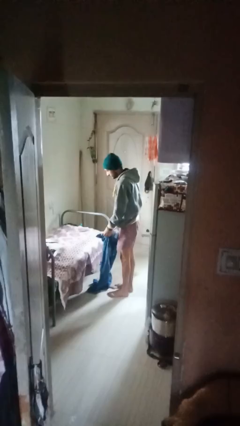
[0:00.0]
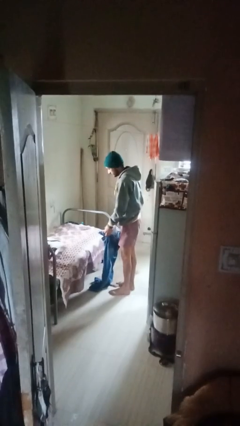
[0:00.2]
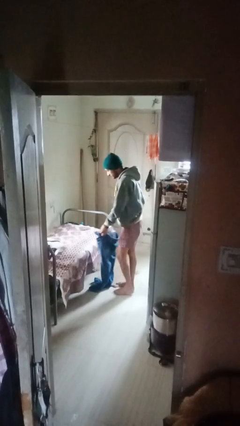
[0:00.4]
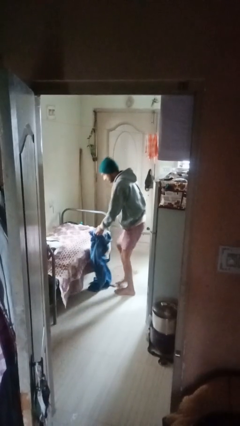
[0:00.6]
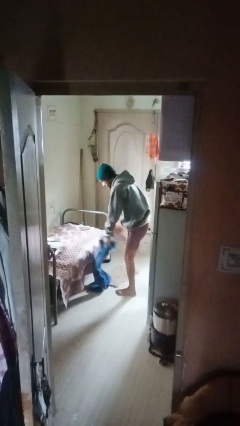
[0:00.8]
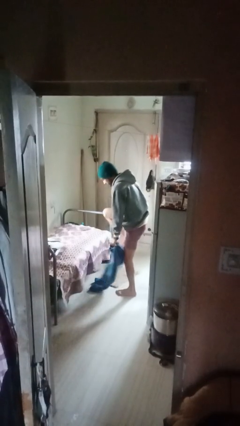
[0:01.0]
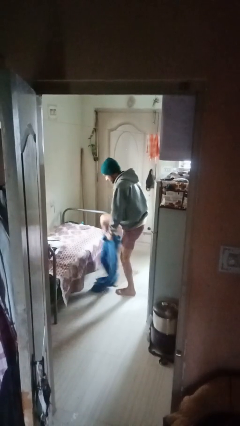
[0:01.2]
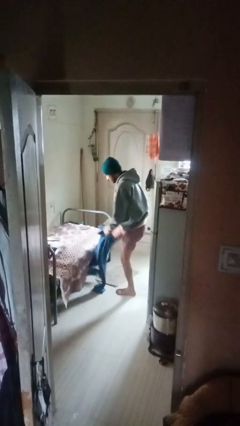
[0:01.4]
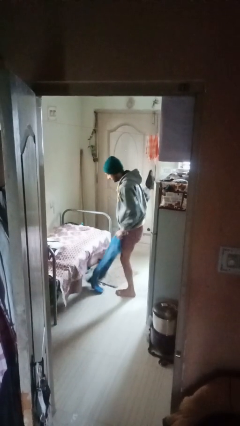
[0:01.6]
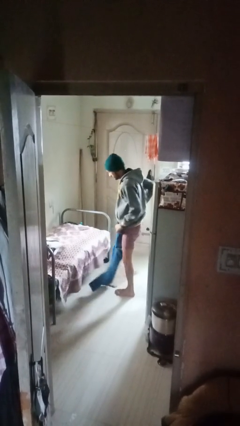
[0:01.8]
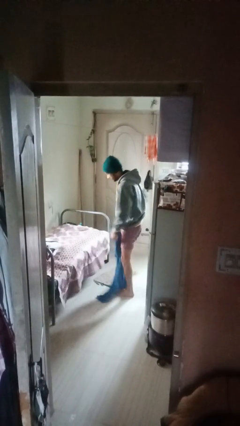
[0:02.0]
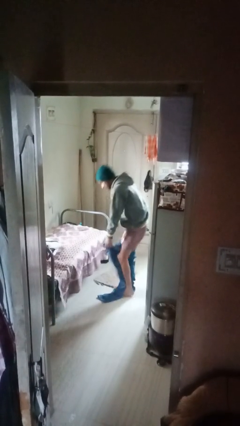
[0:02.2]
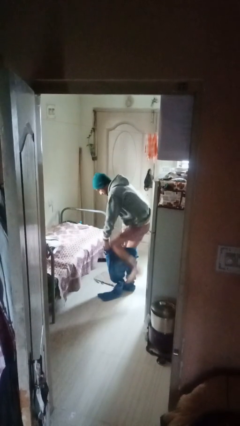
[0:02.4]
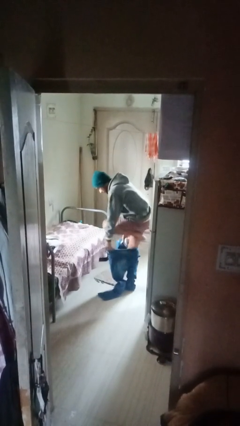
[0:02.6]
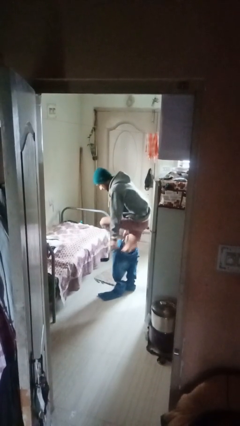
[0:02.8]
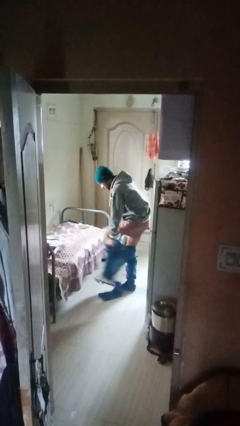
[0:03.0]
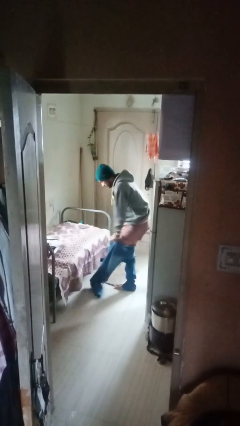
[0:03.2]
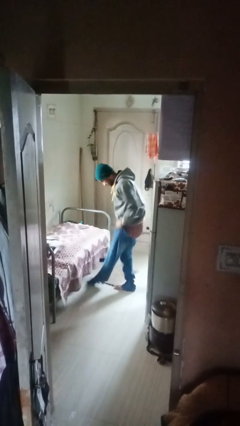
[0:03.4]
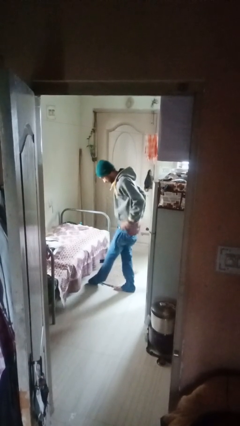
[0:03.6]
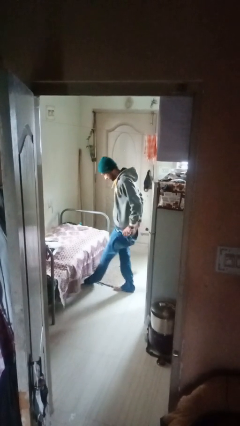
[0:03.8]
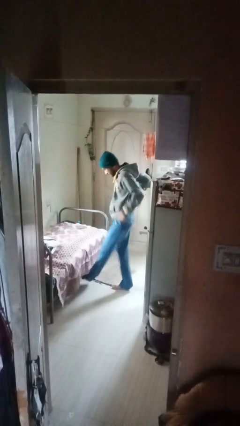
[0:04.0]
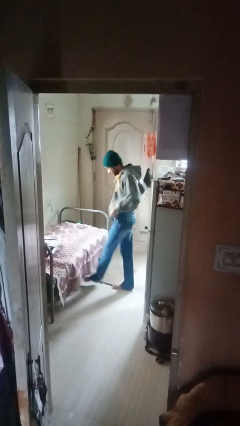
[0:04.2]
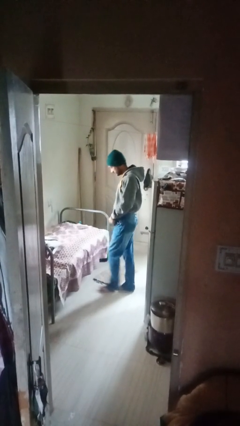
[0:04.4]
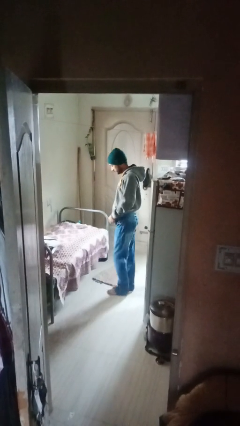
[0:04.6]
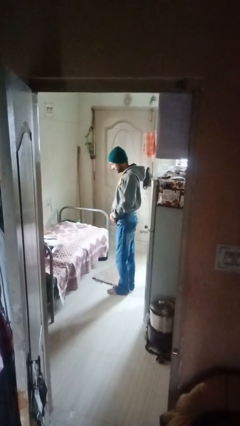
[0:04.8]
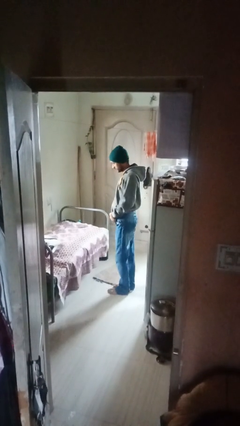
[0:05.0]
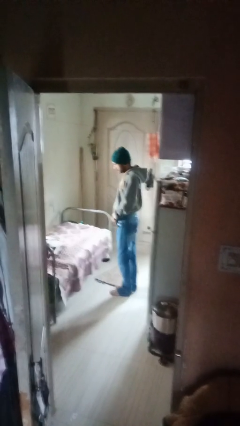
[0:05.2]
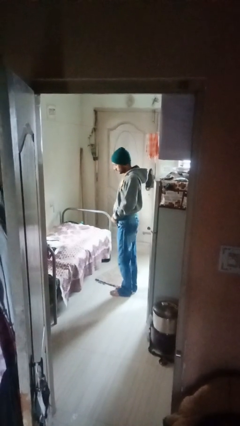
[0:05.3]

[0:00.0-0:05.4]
person puts on pants

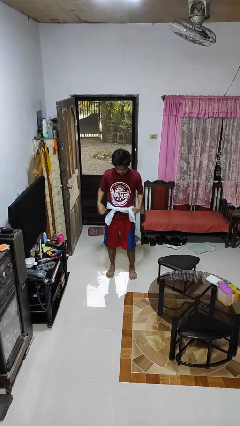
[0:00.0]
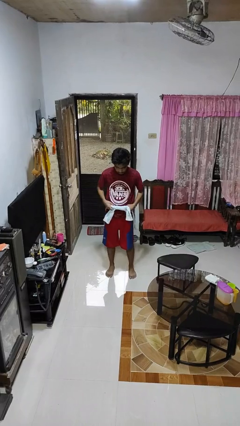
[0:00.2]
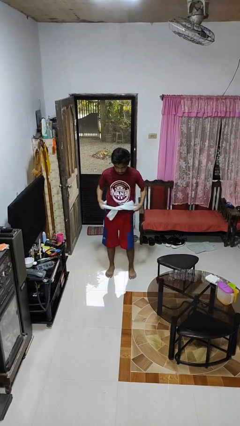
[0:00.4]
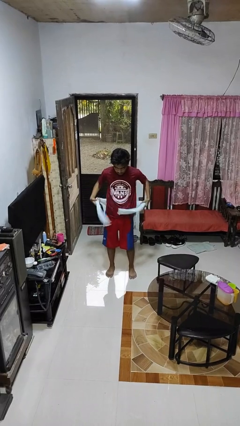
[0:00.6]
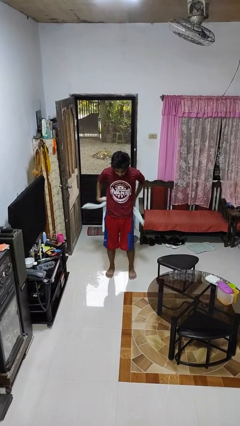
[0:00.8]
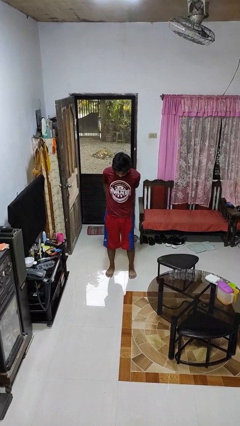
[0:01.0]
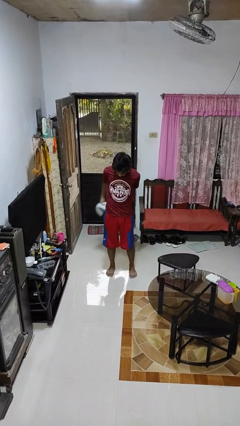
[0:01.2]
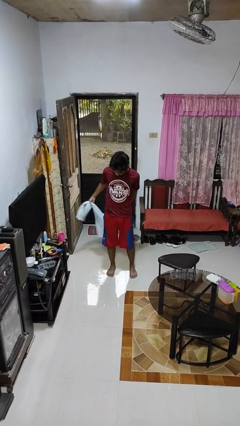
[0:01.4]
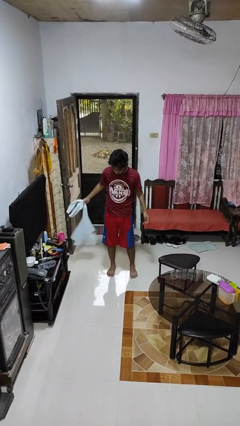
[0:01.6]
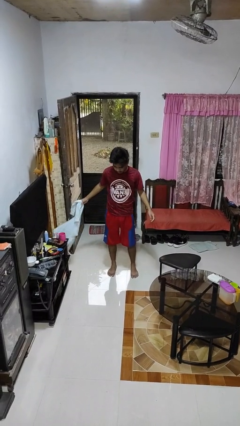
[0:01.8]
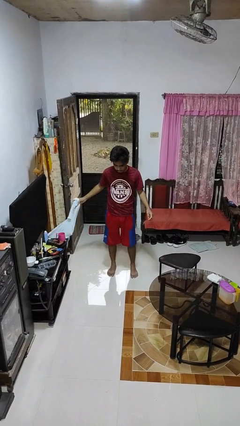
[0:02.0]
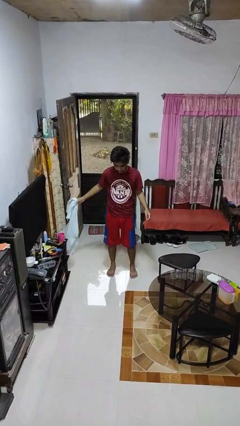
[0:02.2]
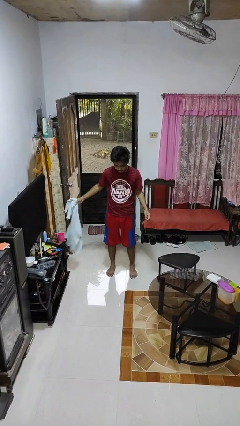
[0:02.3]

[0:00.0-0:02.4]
person unties jacket around waist

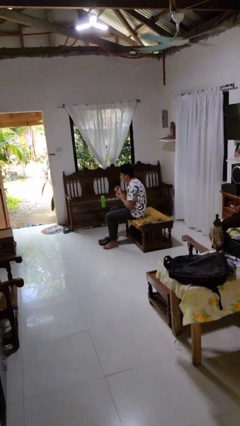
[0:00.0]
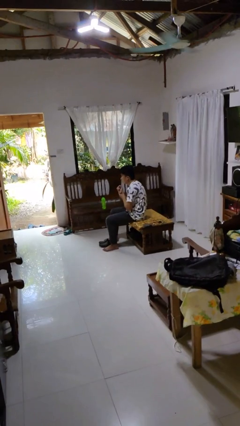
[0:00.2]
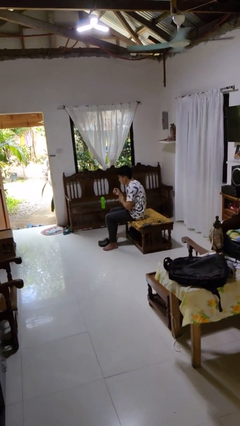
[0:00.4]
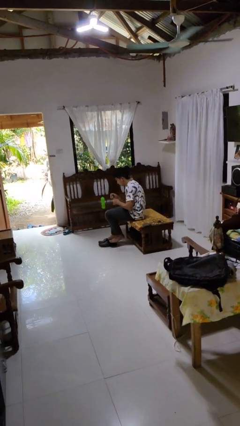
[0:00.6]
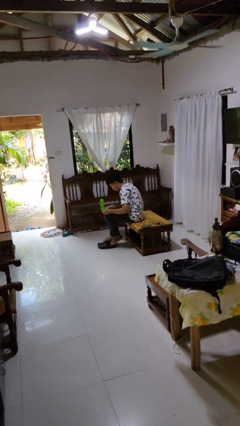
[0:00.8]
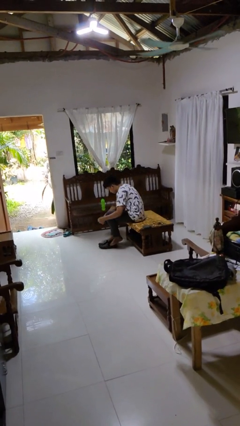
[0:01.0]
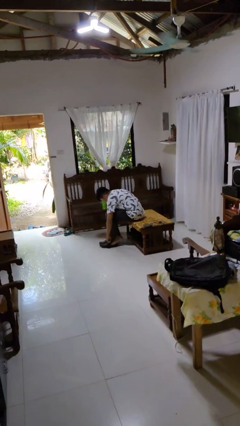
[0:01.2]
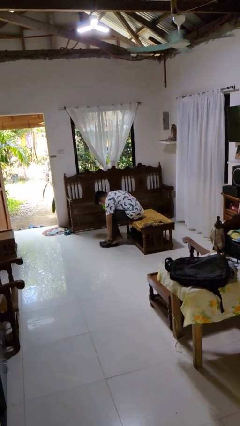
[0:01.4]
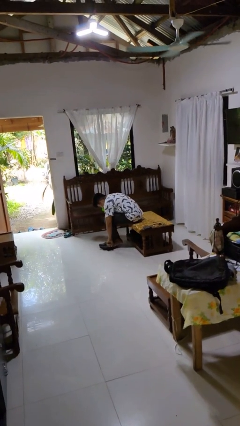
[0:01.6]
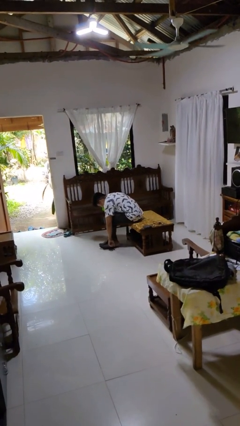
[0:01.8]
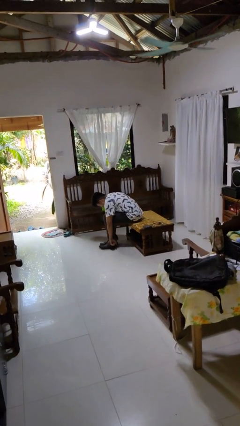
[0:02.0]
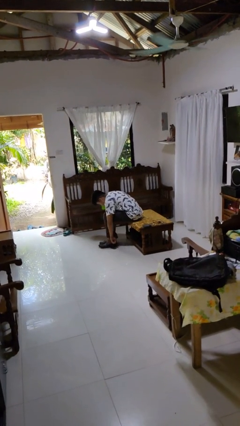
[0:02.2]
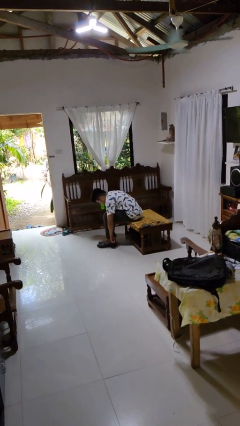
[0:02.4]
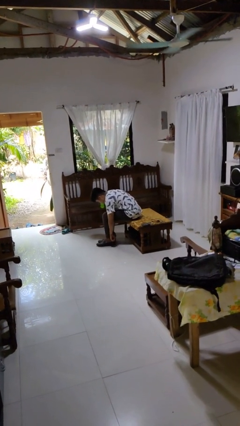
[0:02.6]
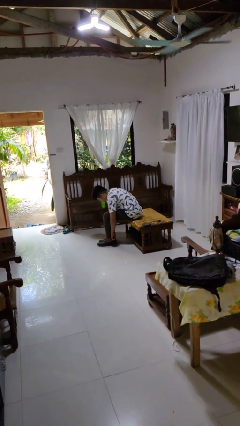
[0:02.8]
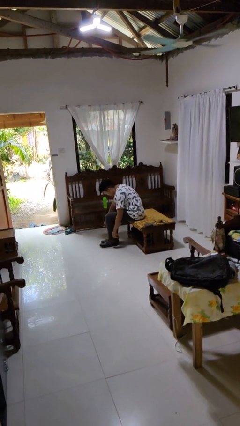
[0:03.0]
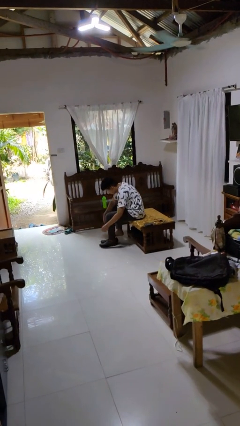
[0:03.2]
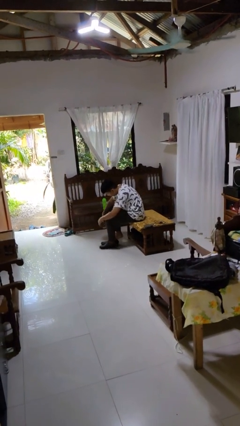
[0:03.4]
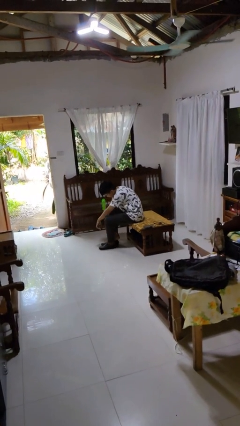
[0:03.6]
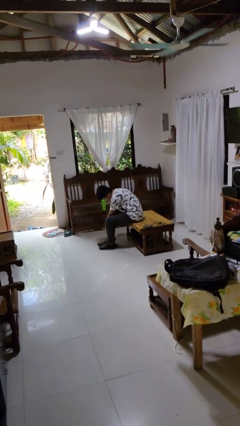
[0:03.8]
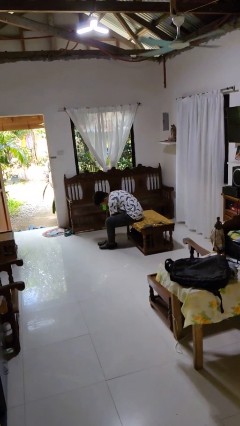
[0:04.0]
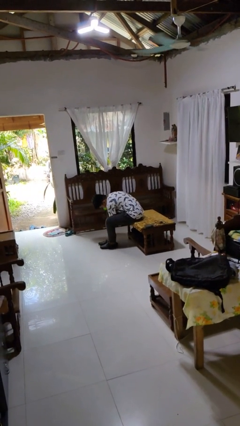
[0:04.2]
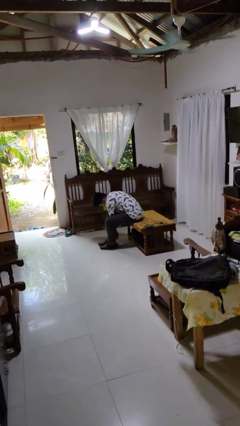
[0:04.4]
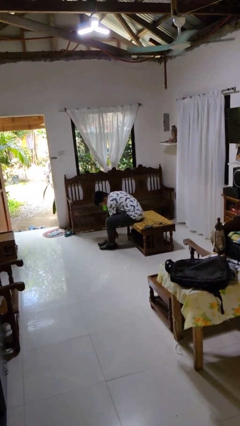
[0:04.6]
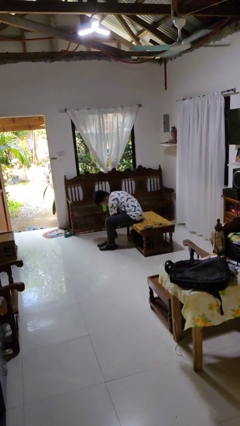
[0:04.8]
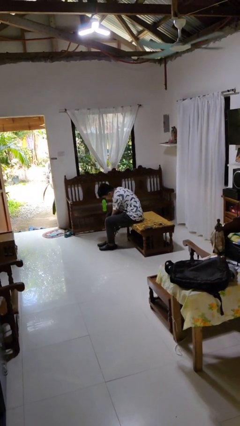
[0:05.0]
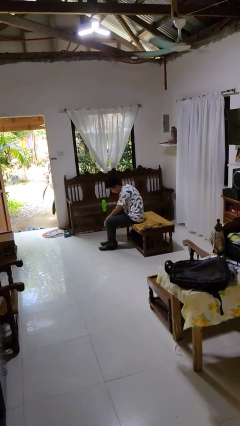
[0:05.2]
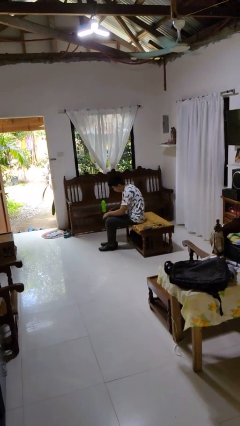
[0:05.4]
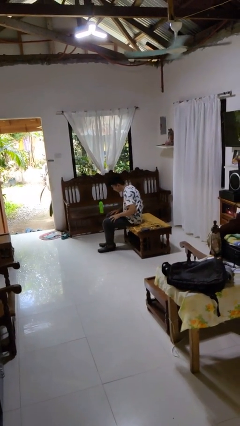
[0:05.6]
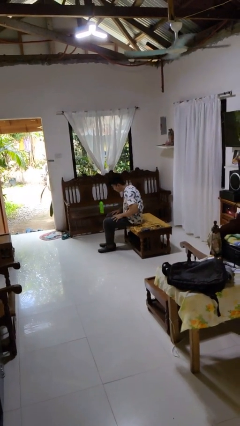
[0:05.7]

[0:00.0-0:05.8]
person puts on shoes

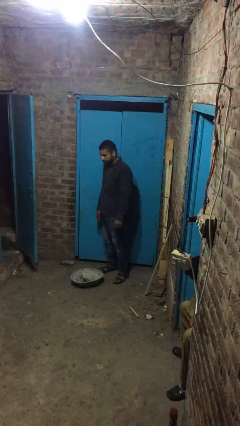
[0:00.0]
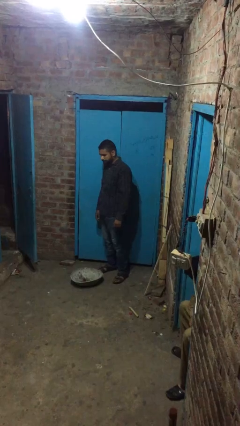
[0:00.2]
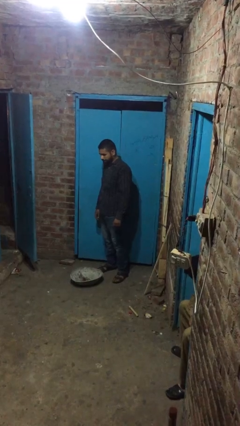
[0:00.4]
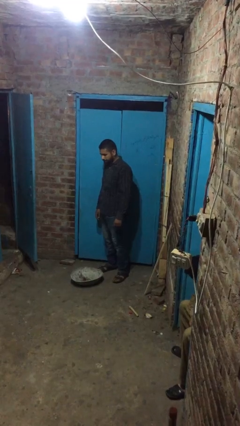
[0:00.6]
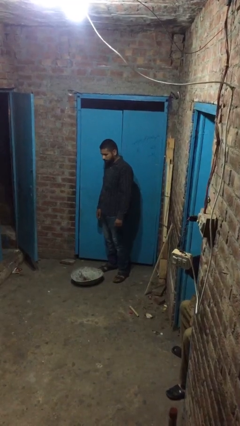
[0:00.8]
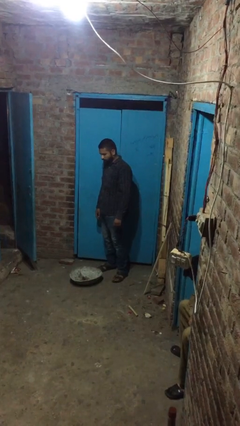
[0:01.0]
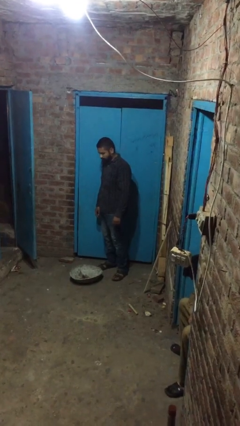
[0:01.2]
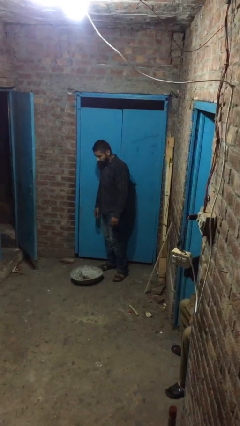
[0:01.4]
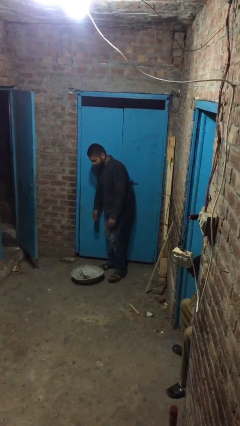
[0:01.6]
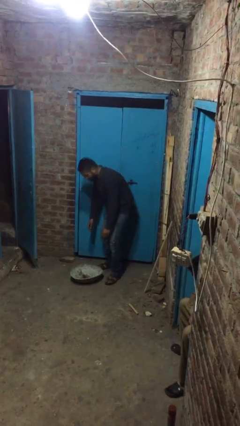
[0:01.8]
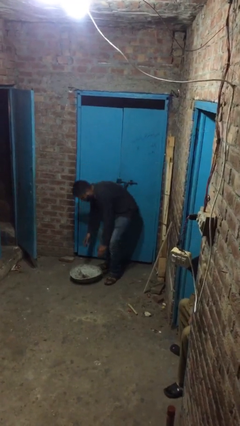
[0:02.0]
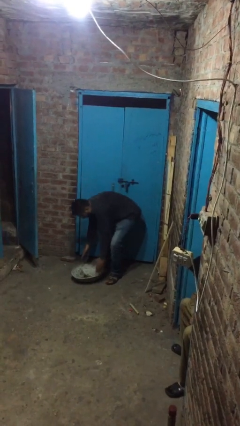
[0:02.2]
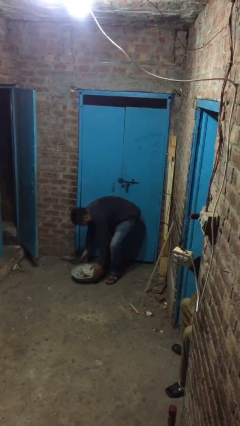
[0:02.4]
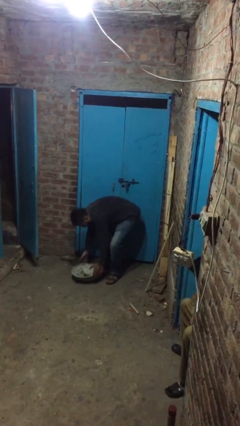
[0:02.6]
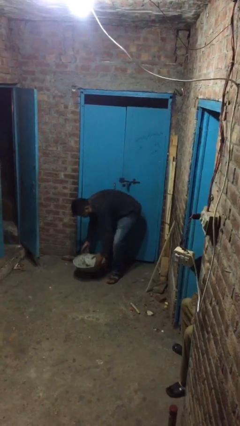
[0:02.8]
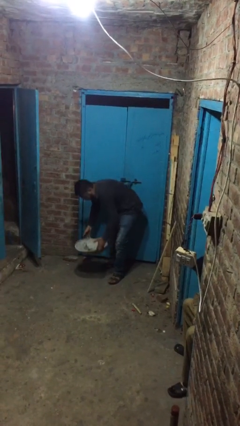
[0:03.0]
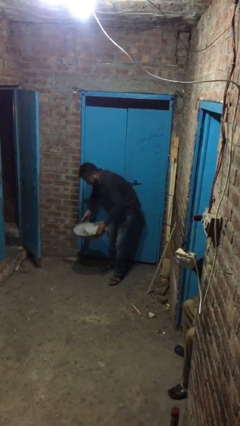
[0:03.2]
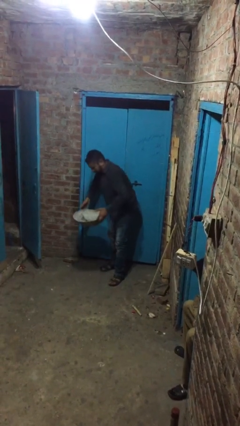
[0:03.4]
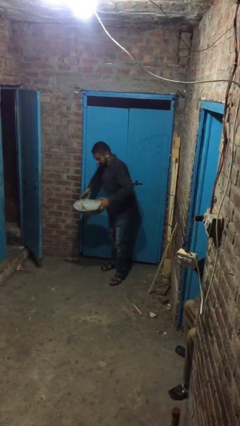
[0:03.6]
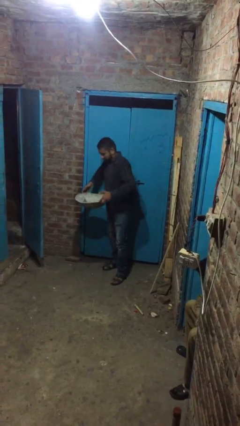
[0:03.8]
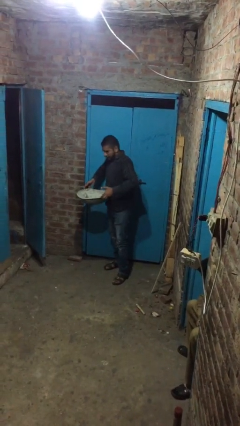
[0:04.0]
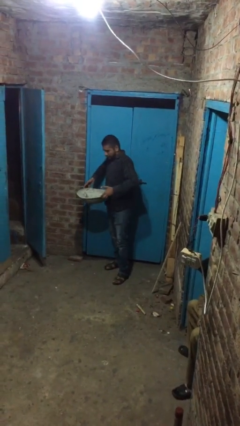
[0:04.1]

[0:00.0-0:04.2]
person picks up object from floor
